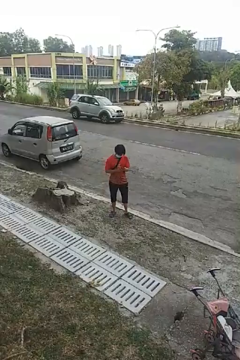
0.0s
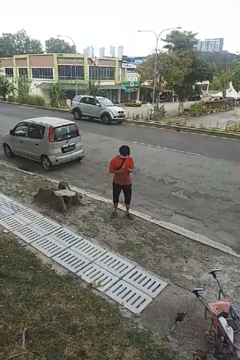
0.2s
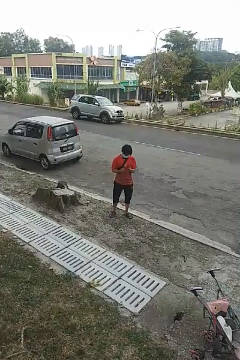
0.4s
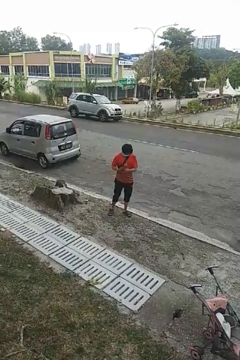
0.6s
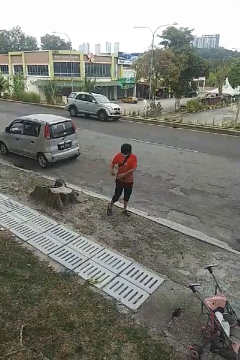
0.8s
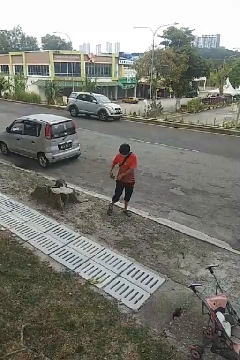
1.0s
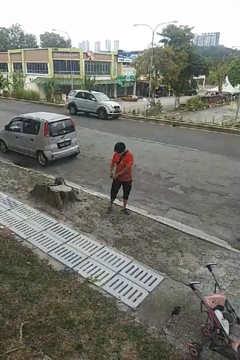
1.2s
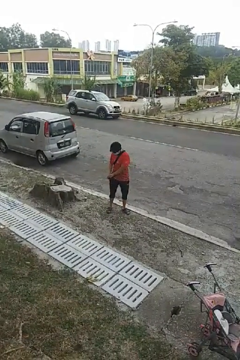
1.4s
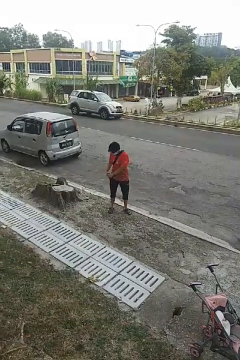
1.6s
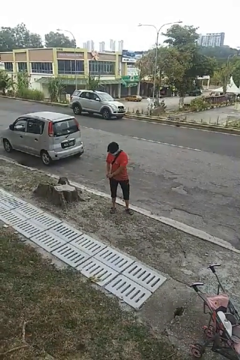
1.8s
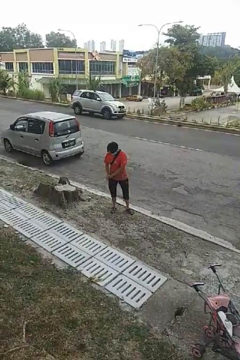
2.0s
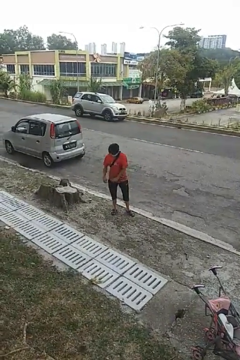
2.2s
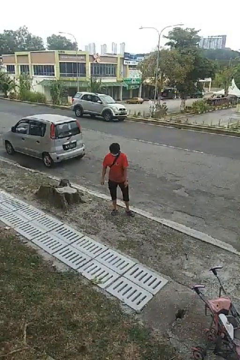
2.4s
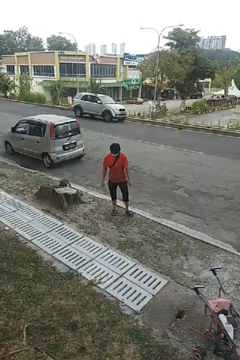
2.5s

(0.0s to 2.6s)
person puts phone into pocket

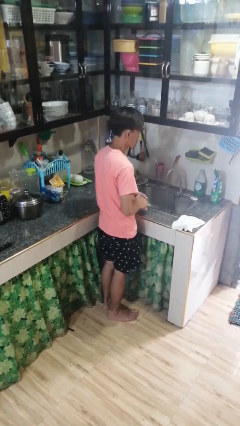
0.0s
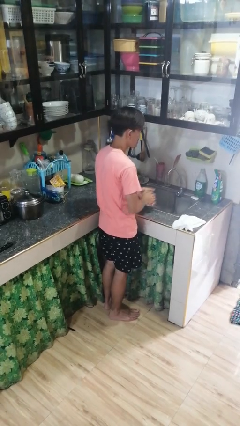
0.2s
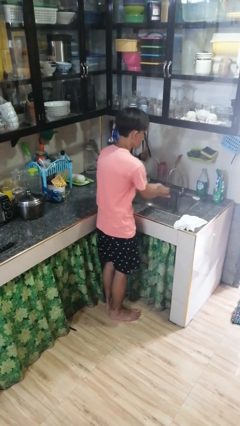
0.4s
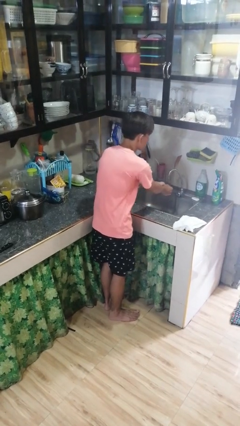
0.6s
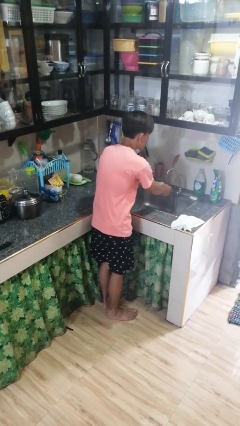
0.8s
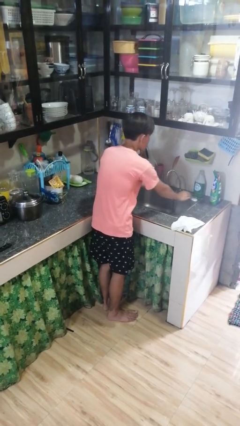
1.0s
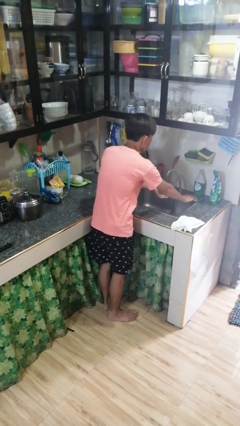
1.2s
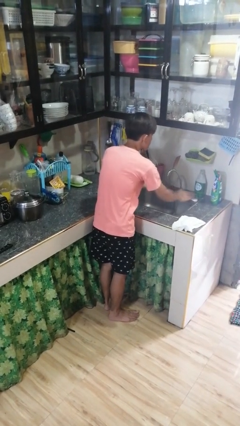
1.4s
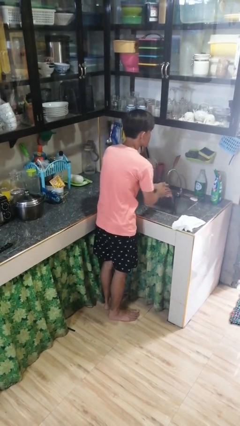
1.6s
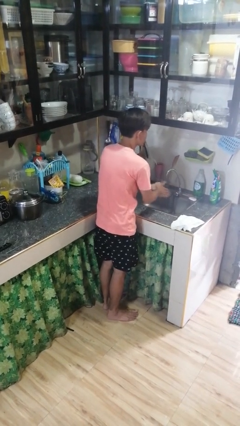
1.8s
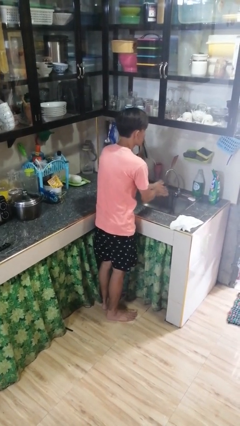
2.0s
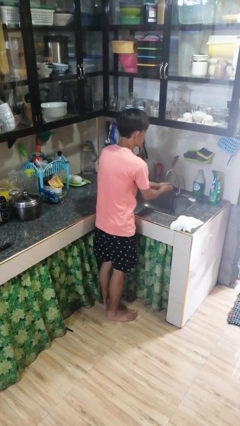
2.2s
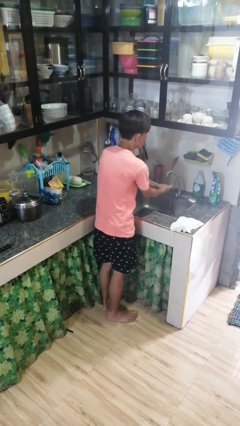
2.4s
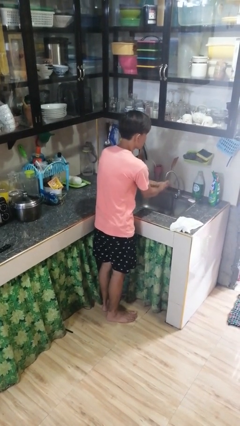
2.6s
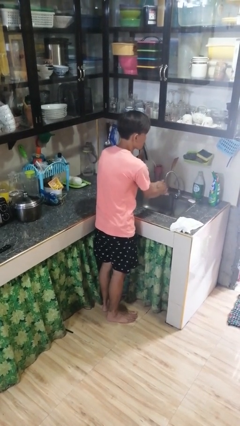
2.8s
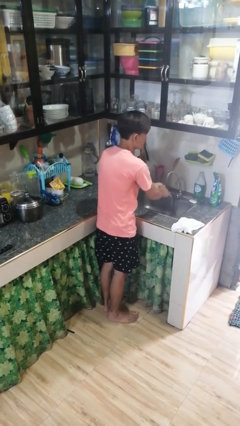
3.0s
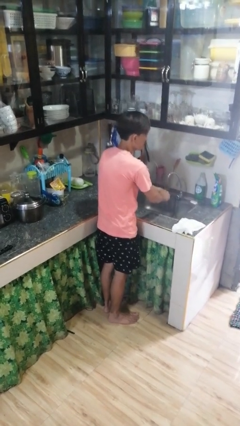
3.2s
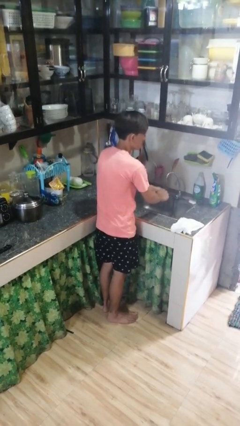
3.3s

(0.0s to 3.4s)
person washes hands

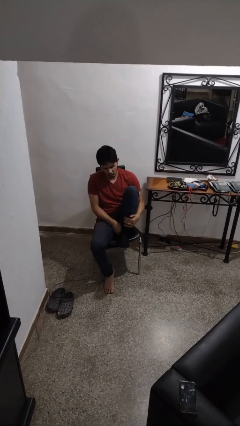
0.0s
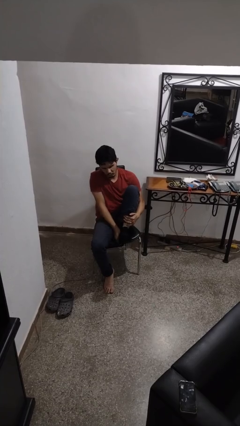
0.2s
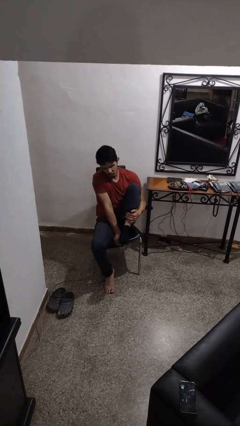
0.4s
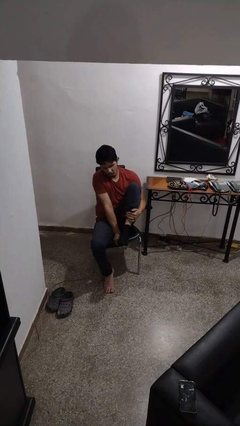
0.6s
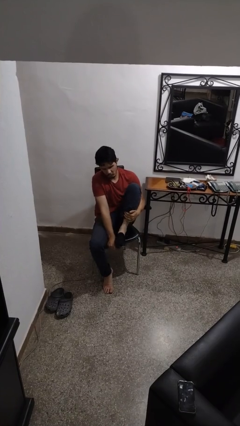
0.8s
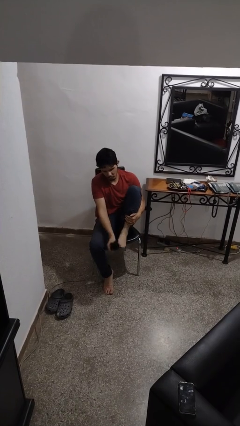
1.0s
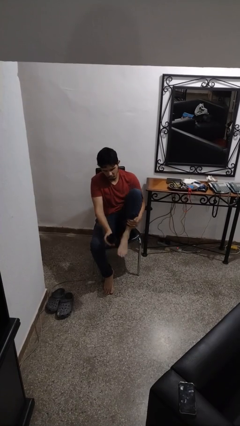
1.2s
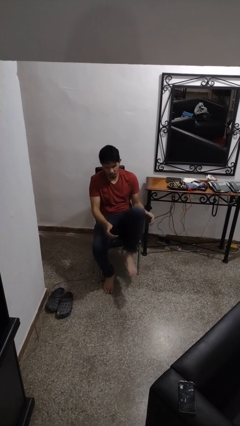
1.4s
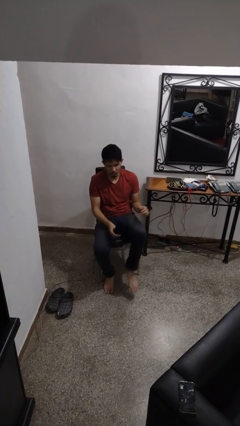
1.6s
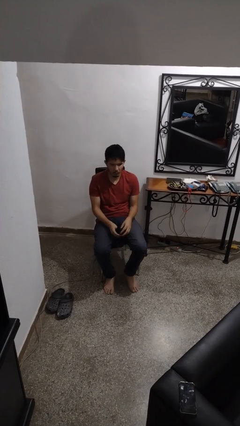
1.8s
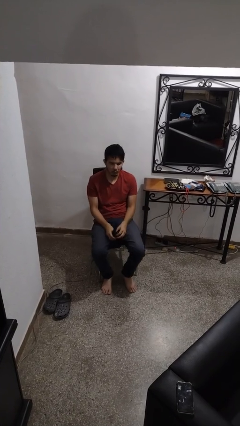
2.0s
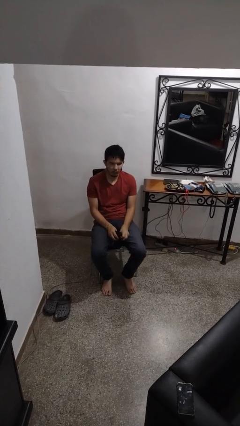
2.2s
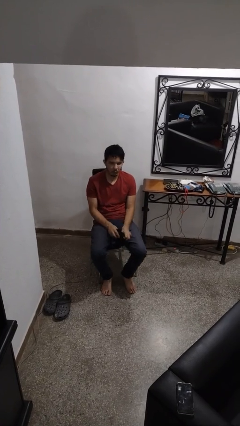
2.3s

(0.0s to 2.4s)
person takes off socks

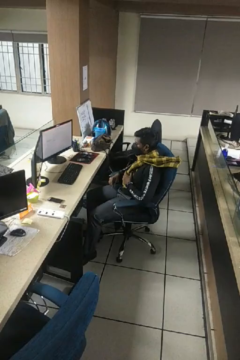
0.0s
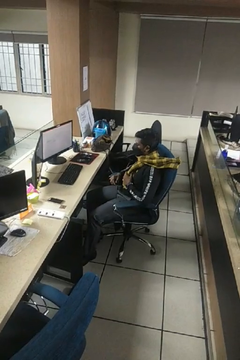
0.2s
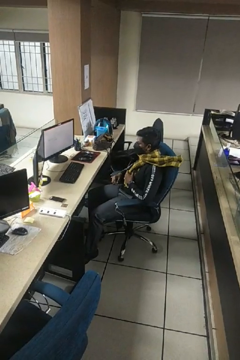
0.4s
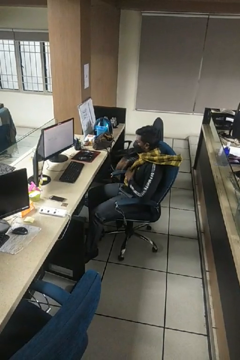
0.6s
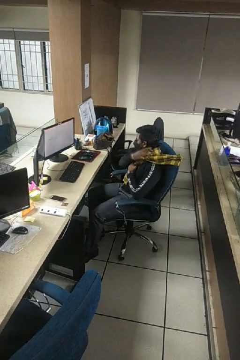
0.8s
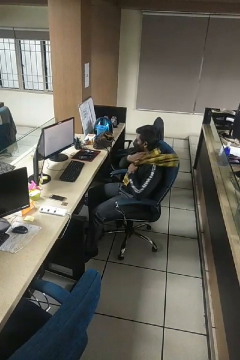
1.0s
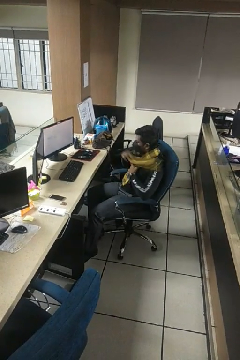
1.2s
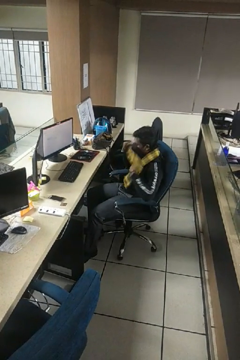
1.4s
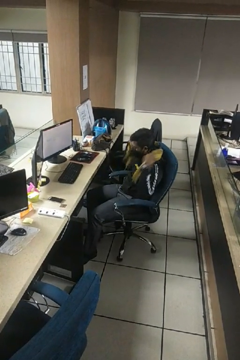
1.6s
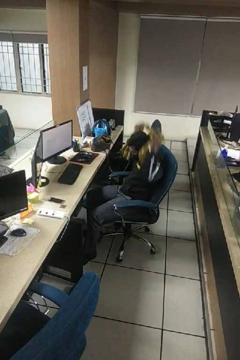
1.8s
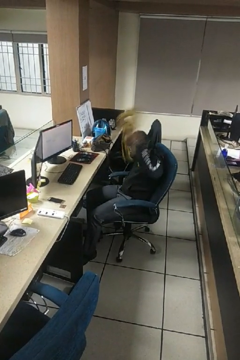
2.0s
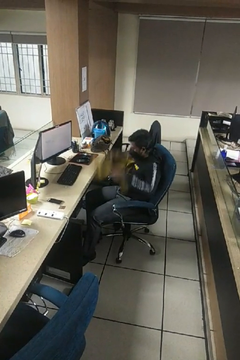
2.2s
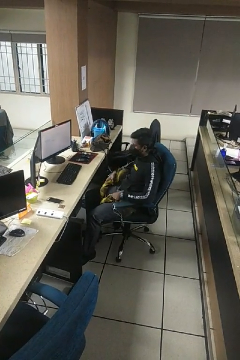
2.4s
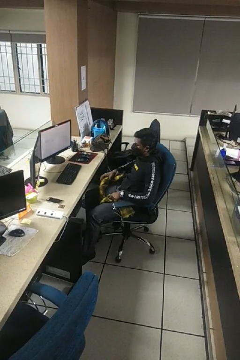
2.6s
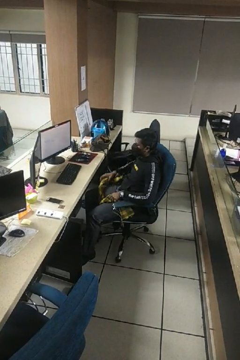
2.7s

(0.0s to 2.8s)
person takes off scarf

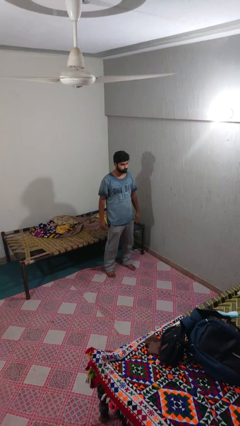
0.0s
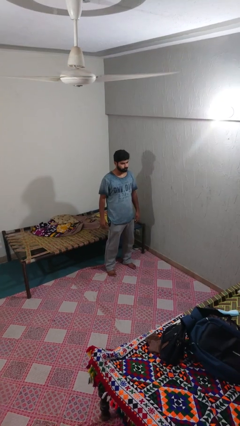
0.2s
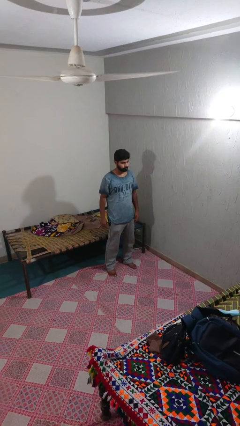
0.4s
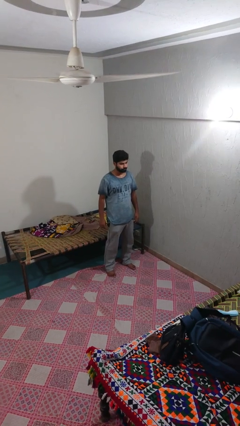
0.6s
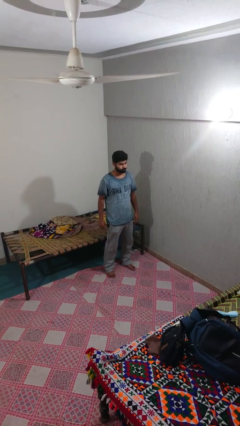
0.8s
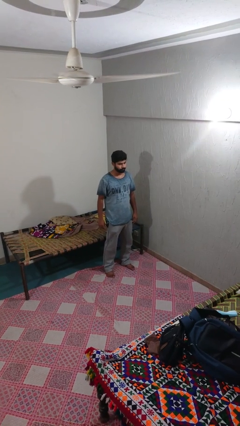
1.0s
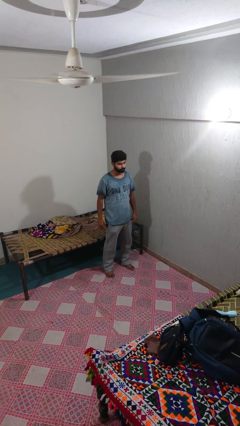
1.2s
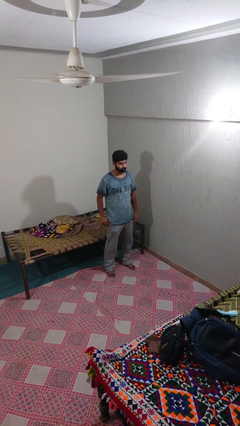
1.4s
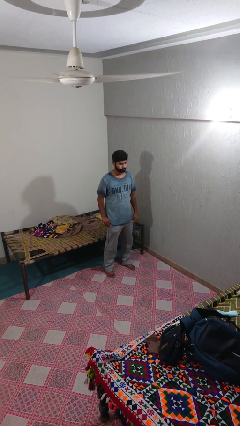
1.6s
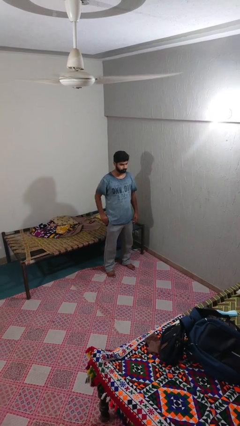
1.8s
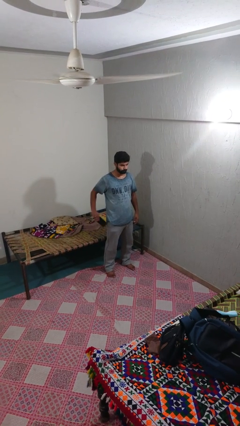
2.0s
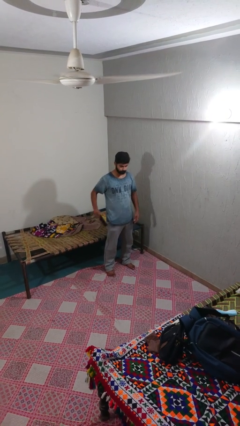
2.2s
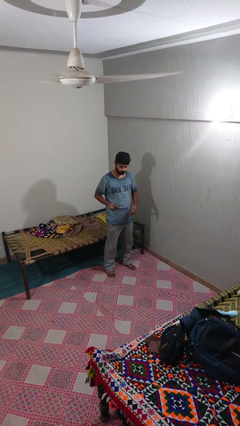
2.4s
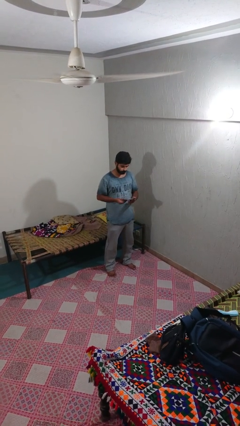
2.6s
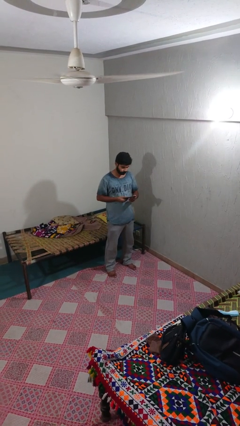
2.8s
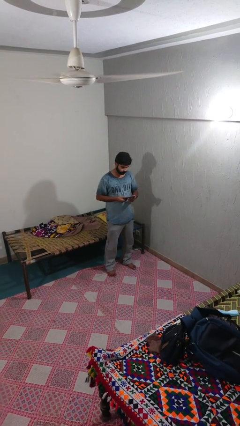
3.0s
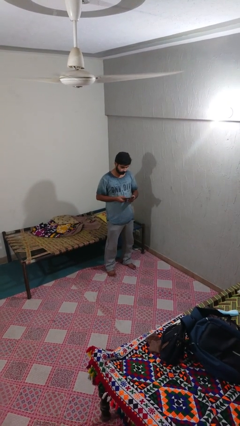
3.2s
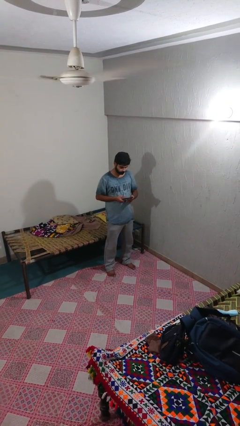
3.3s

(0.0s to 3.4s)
person takes phone from pocket

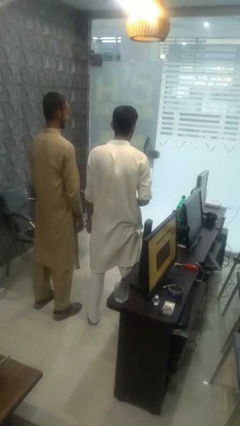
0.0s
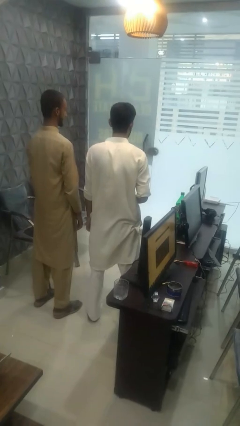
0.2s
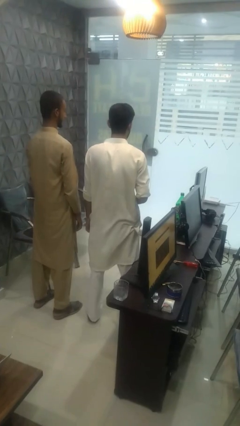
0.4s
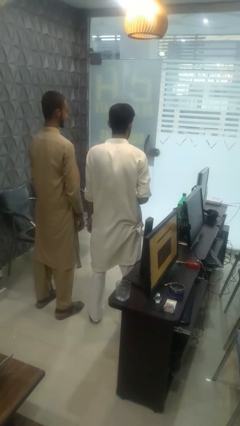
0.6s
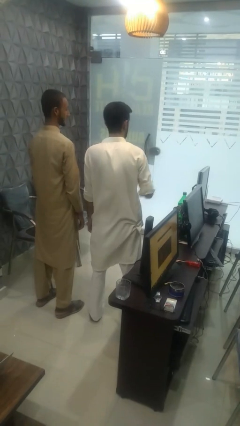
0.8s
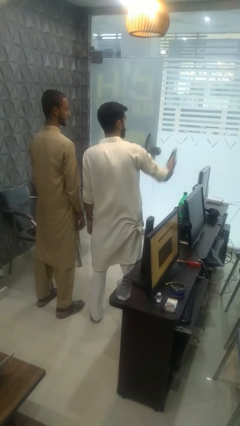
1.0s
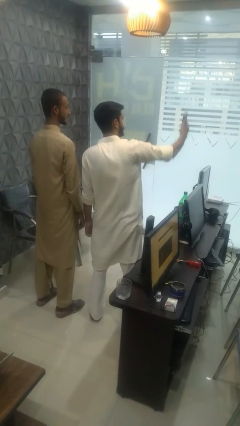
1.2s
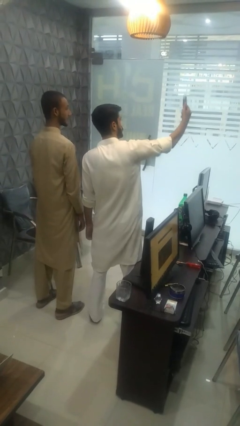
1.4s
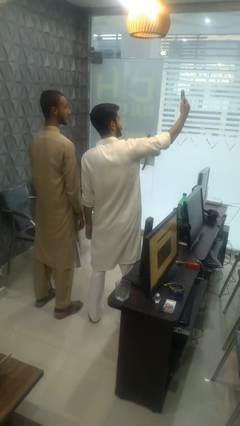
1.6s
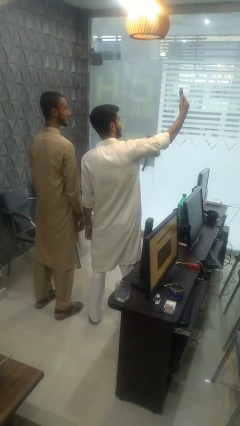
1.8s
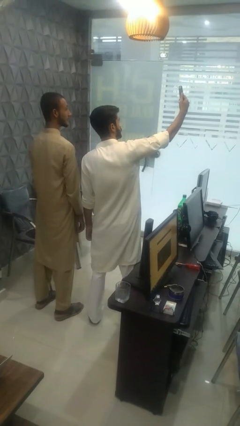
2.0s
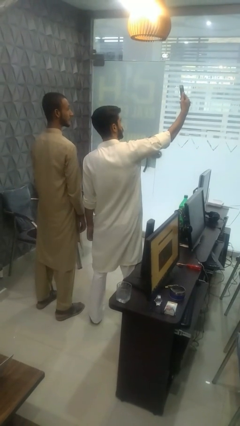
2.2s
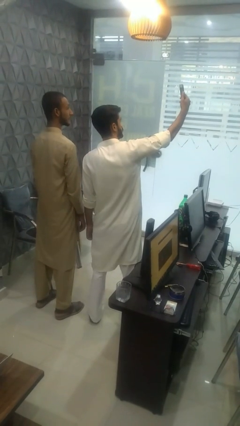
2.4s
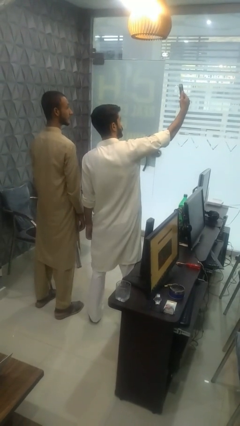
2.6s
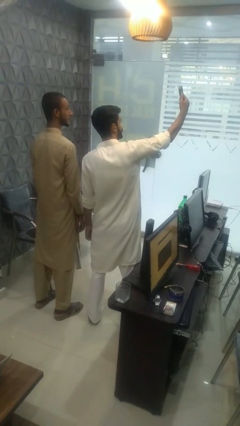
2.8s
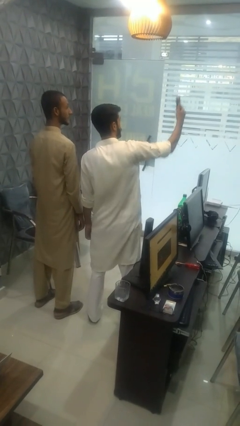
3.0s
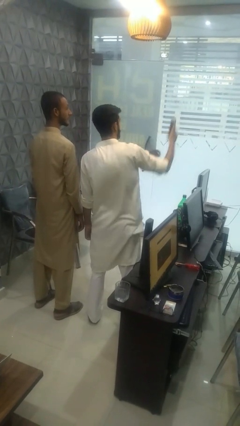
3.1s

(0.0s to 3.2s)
person takes selfie with person

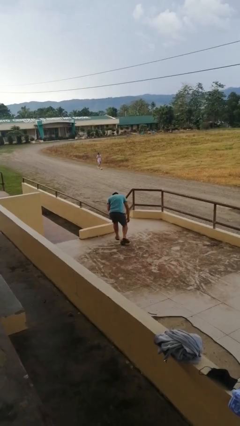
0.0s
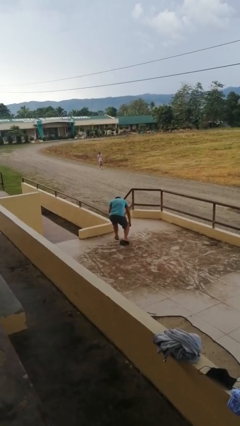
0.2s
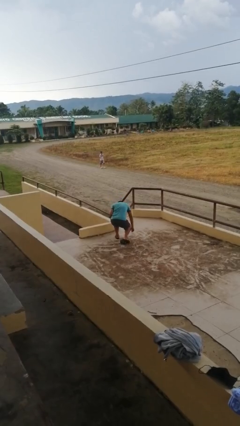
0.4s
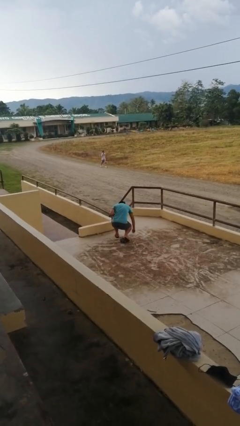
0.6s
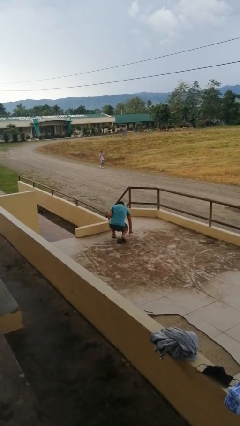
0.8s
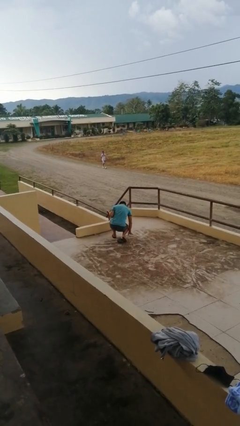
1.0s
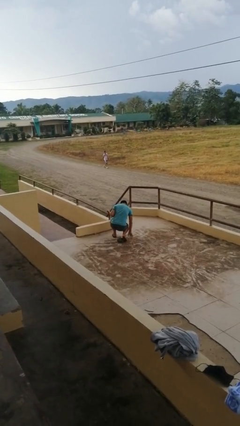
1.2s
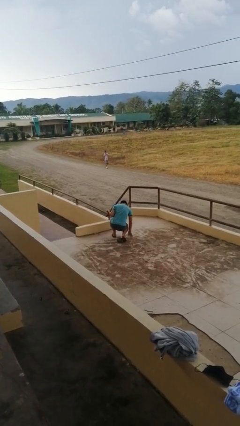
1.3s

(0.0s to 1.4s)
person lies down on floor
